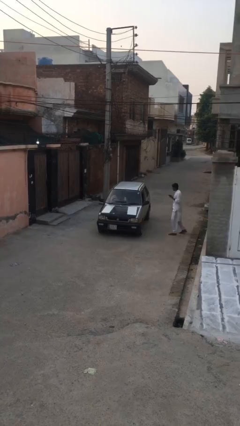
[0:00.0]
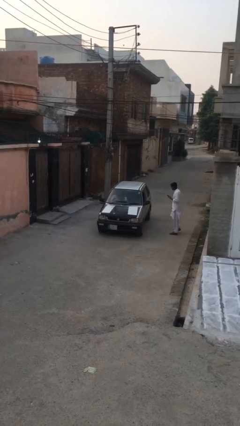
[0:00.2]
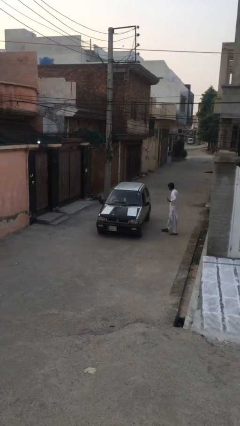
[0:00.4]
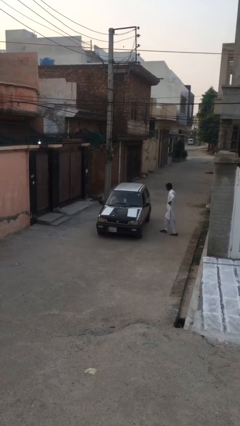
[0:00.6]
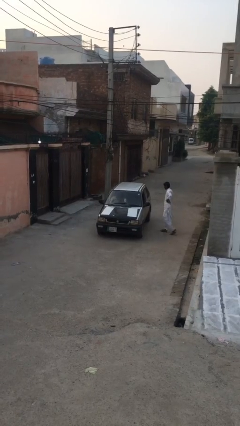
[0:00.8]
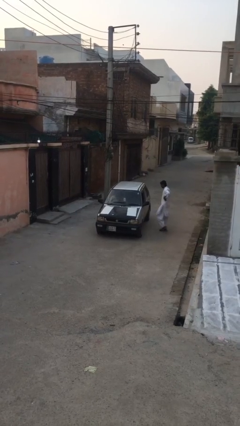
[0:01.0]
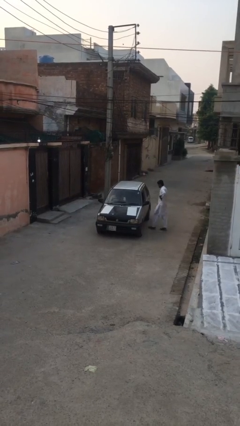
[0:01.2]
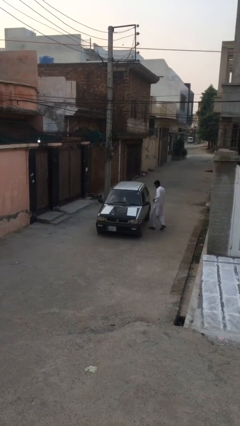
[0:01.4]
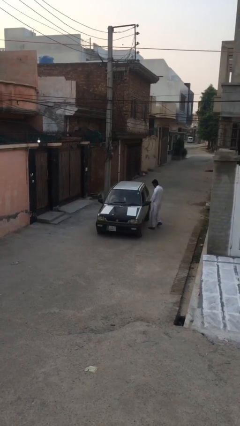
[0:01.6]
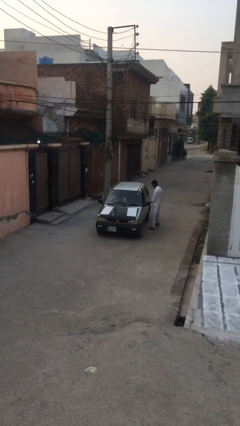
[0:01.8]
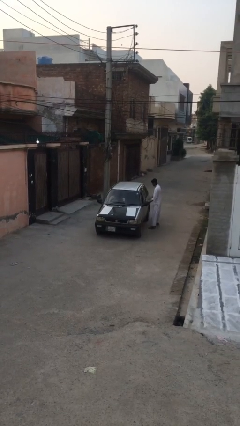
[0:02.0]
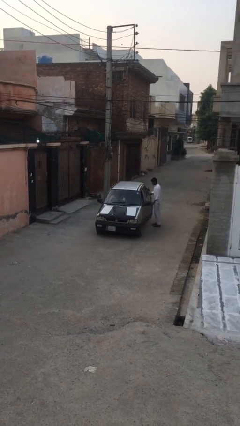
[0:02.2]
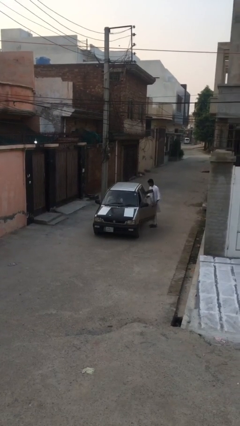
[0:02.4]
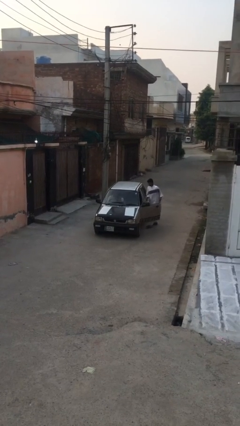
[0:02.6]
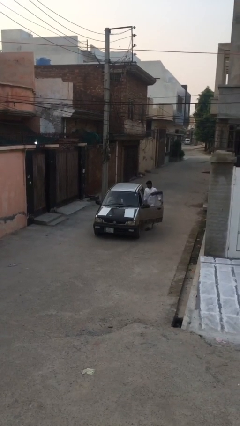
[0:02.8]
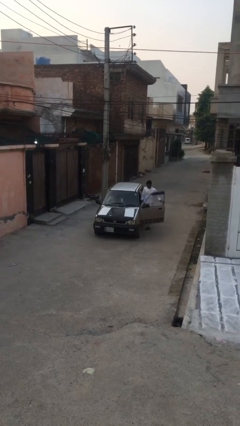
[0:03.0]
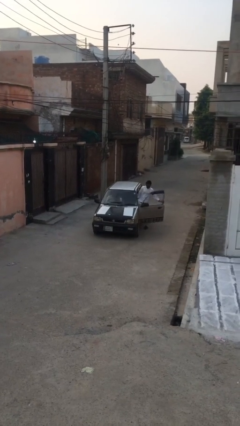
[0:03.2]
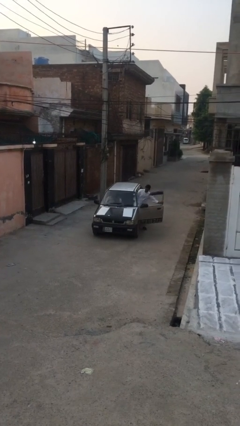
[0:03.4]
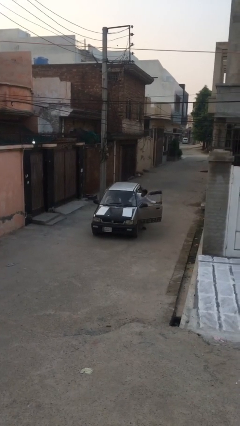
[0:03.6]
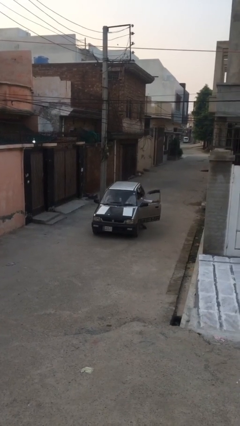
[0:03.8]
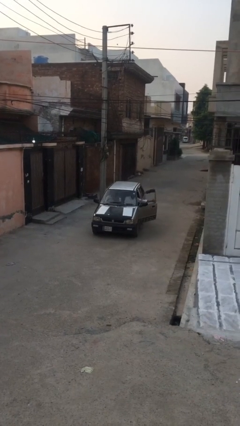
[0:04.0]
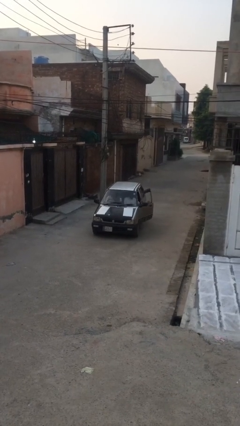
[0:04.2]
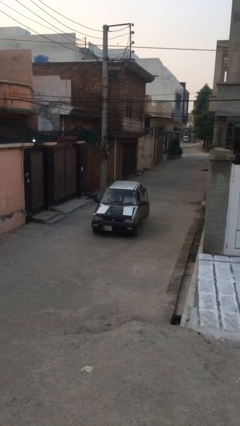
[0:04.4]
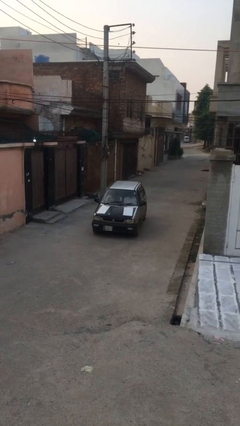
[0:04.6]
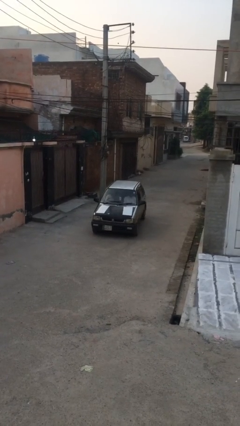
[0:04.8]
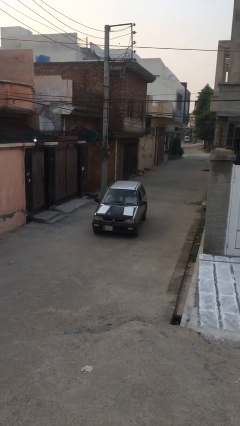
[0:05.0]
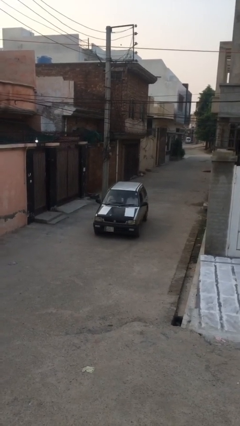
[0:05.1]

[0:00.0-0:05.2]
car picks up person

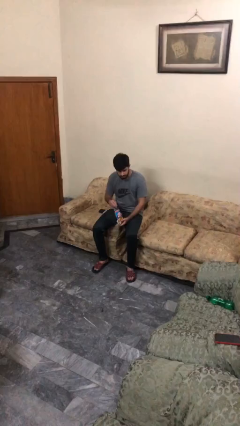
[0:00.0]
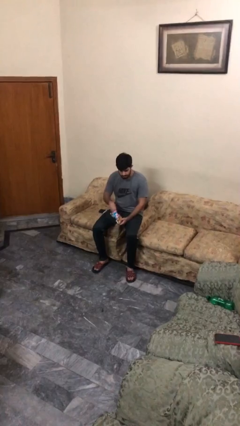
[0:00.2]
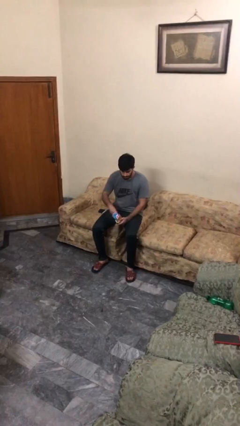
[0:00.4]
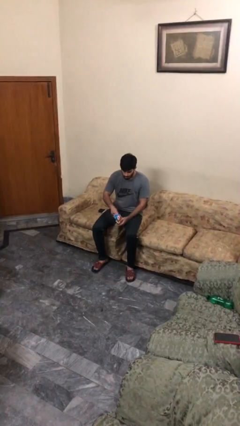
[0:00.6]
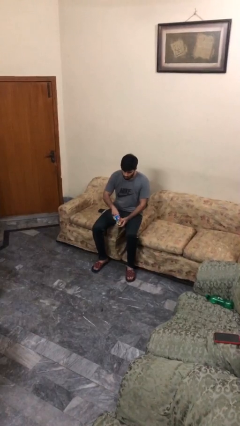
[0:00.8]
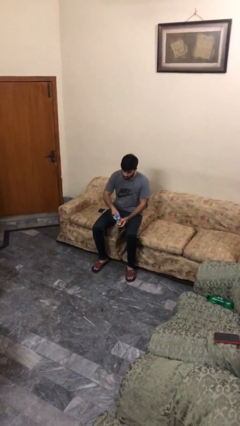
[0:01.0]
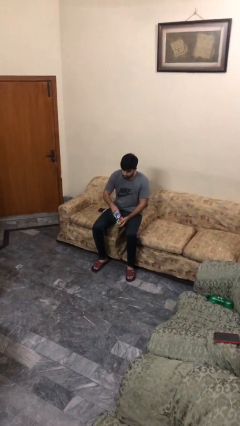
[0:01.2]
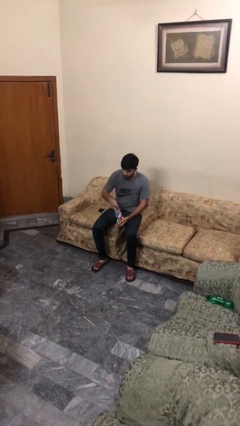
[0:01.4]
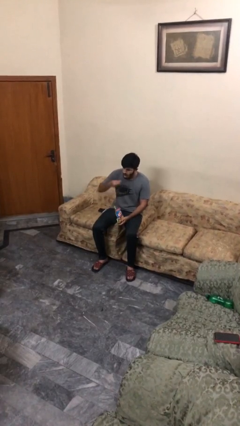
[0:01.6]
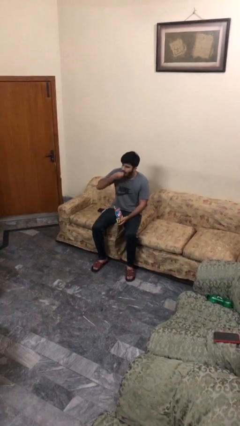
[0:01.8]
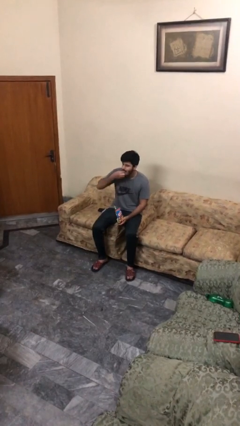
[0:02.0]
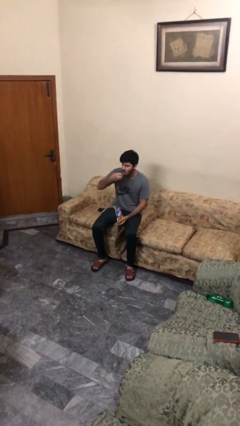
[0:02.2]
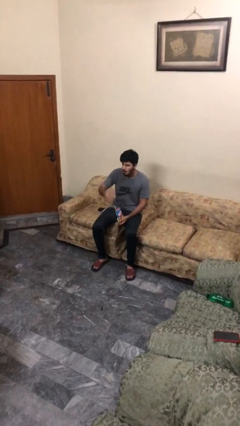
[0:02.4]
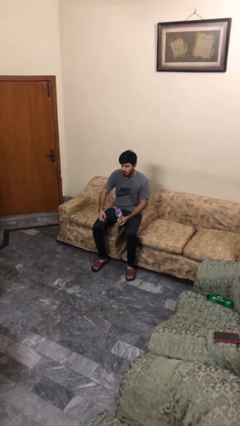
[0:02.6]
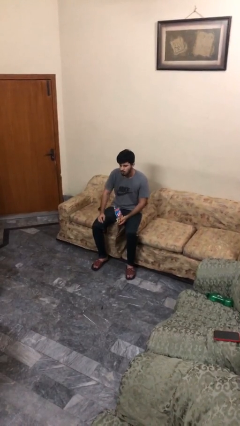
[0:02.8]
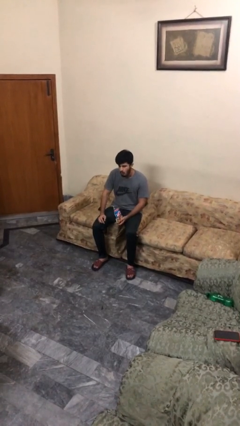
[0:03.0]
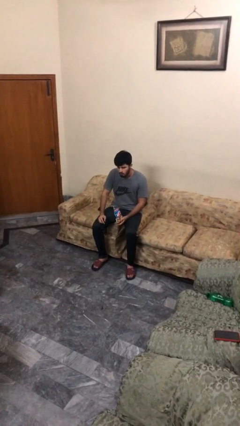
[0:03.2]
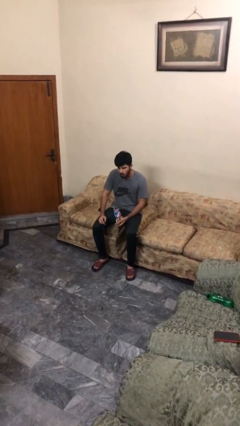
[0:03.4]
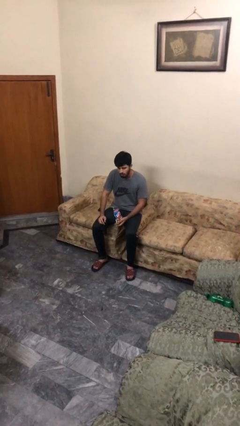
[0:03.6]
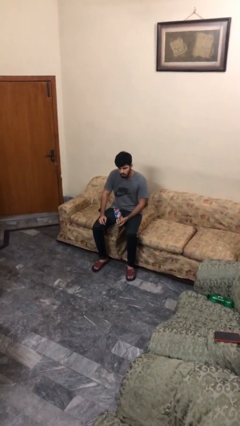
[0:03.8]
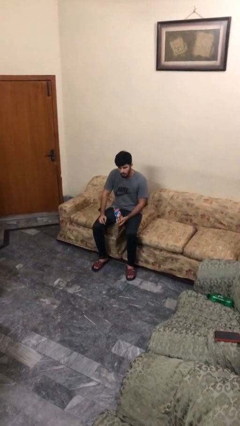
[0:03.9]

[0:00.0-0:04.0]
person eats snack from bag

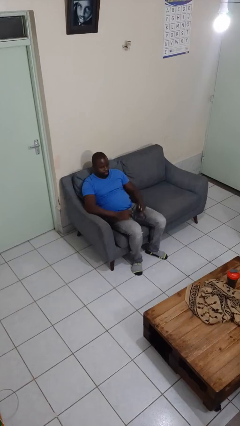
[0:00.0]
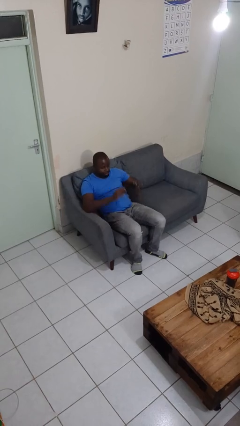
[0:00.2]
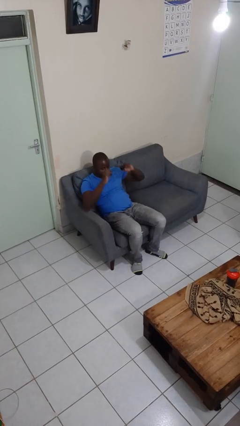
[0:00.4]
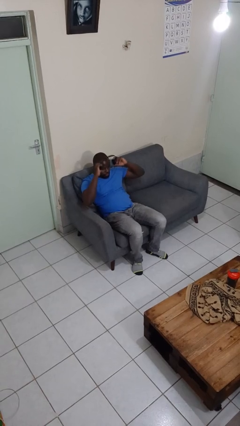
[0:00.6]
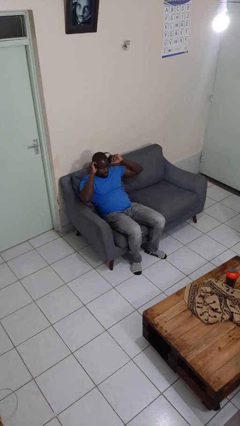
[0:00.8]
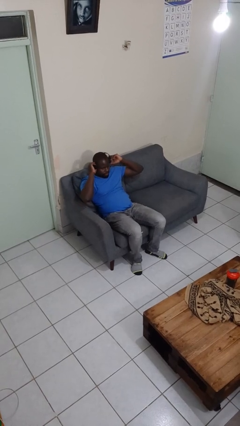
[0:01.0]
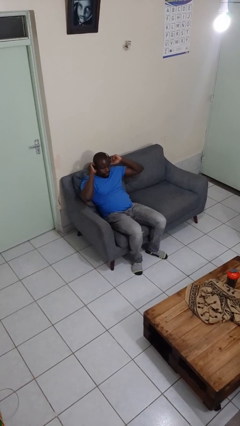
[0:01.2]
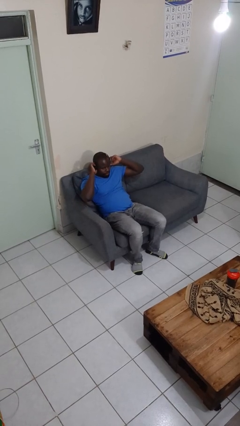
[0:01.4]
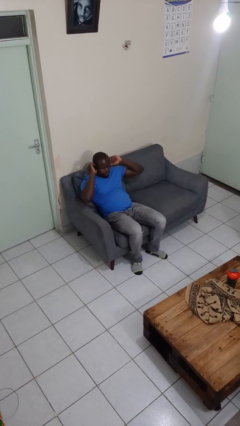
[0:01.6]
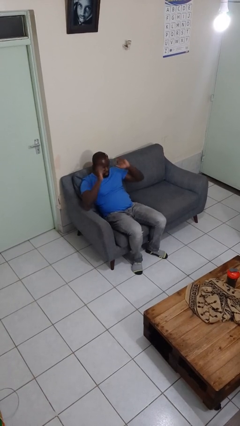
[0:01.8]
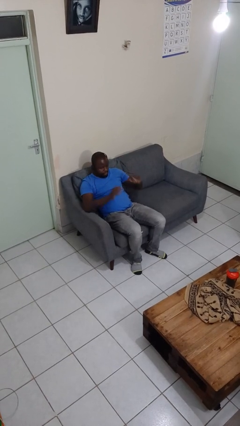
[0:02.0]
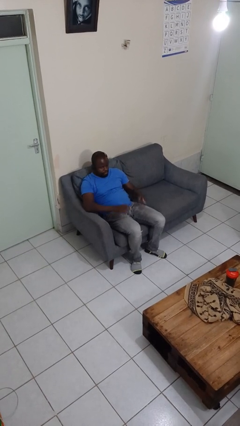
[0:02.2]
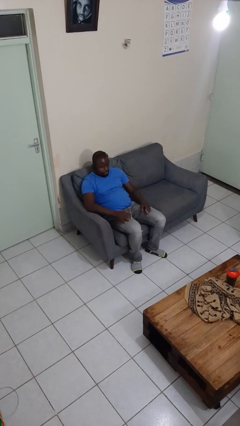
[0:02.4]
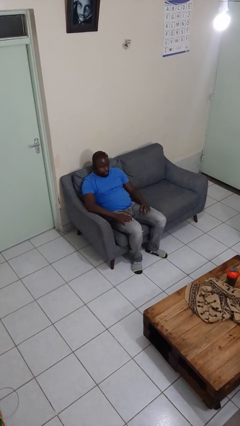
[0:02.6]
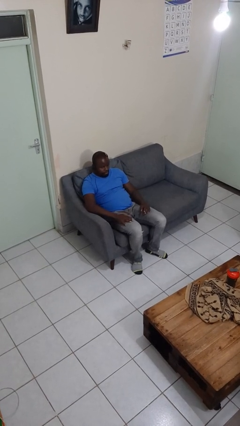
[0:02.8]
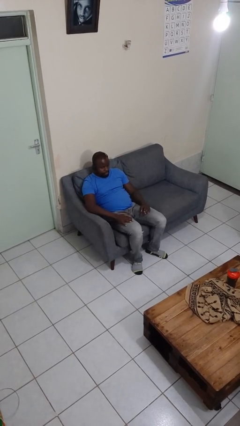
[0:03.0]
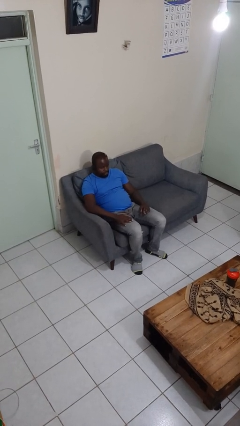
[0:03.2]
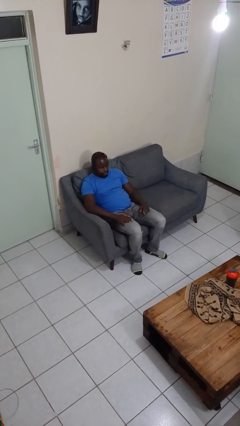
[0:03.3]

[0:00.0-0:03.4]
person puts on headphones

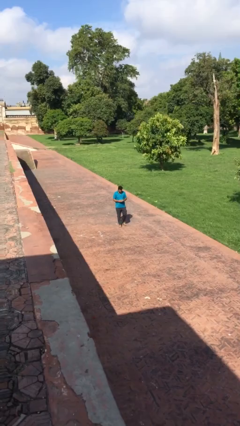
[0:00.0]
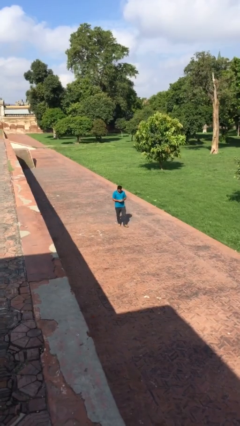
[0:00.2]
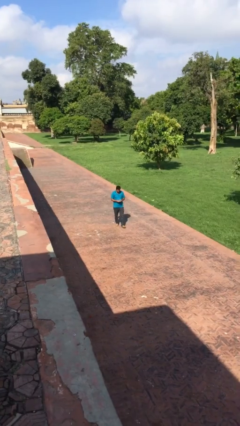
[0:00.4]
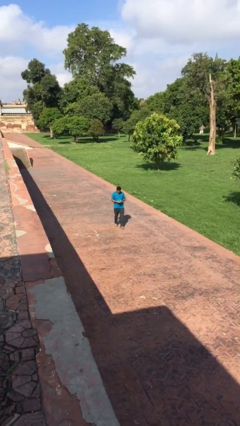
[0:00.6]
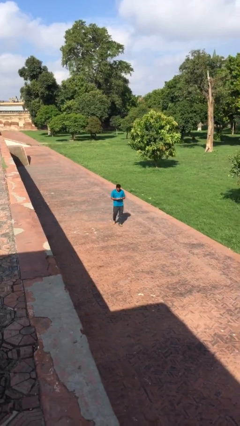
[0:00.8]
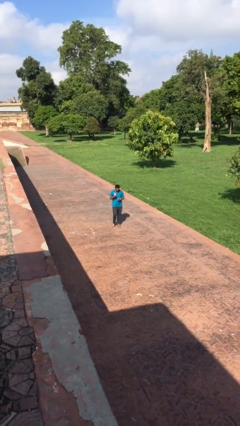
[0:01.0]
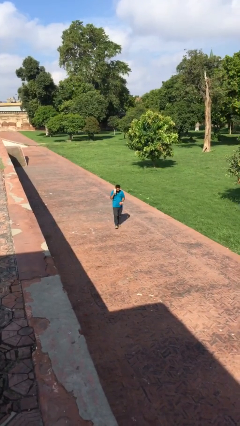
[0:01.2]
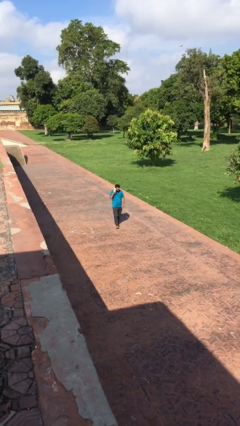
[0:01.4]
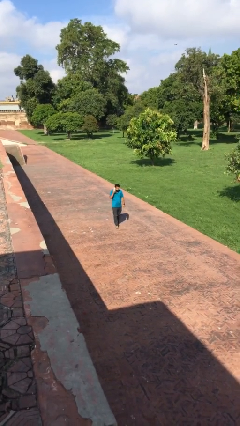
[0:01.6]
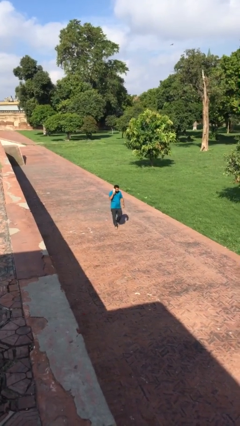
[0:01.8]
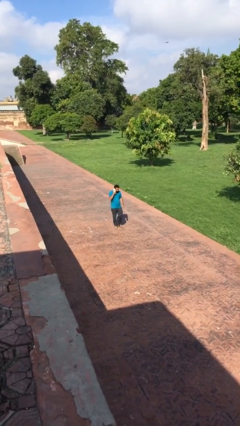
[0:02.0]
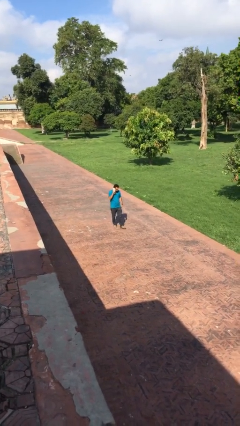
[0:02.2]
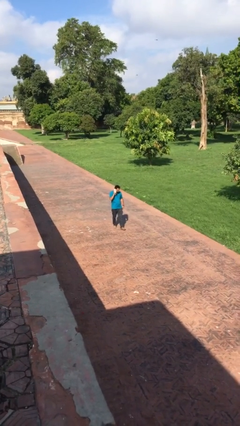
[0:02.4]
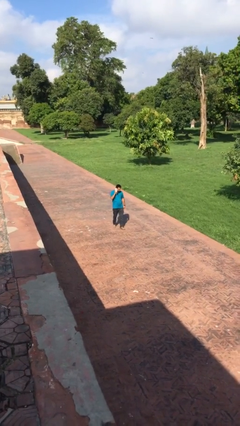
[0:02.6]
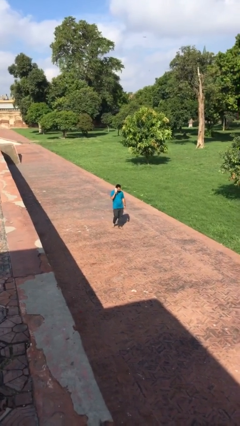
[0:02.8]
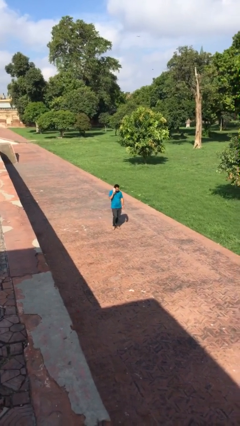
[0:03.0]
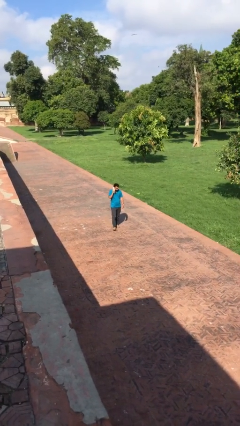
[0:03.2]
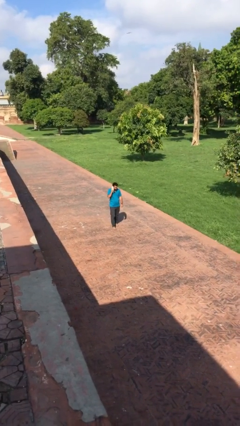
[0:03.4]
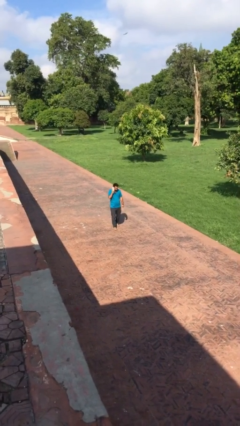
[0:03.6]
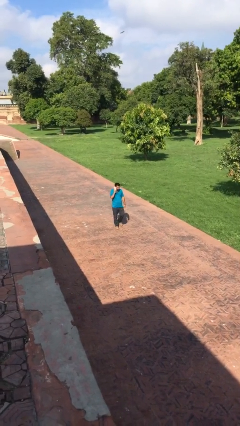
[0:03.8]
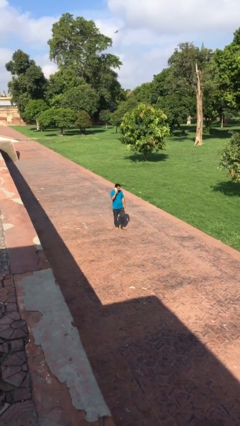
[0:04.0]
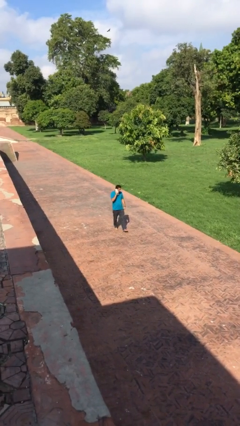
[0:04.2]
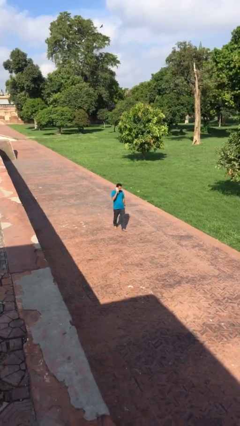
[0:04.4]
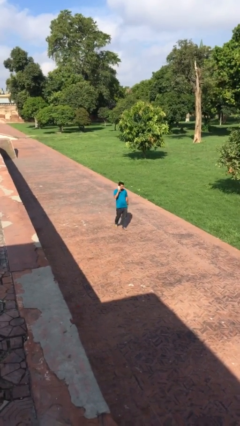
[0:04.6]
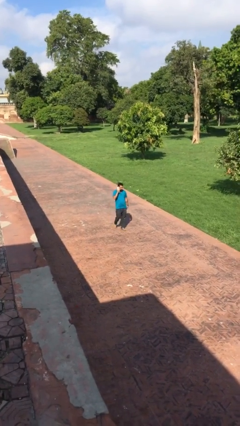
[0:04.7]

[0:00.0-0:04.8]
person talks on phone

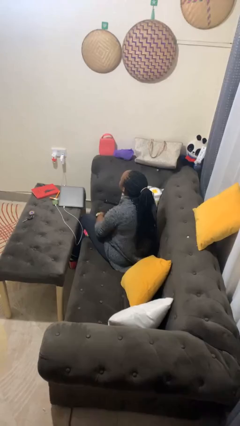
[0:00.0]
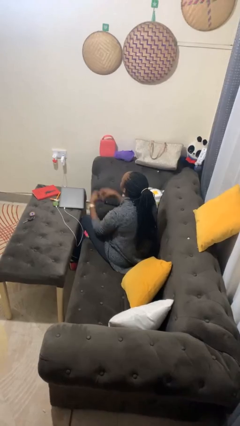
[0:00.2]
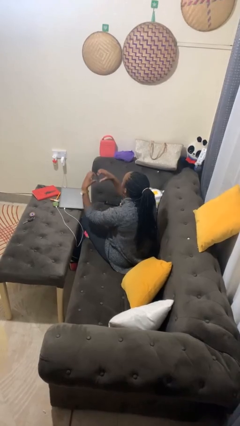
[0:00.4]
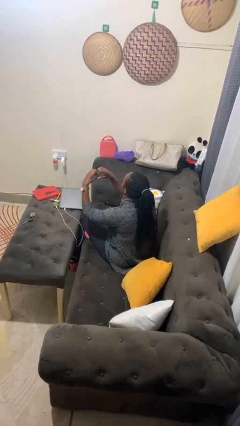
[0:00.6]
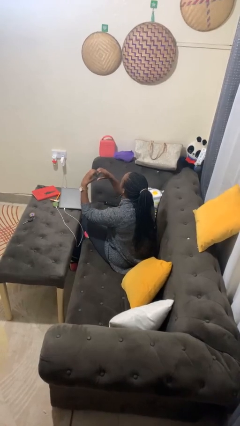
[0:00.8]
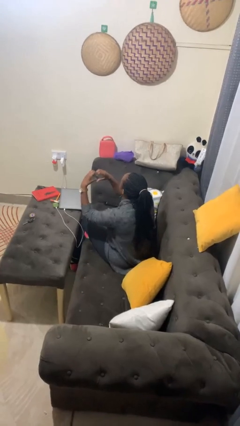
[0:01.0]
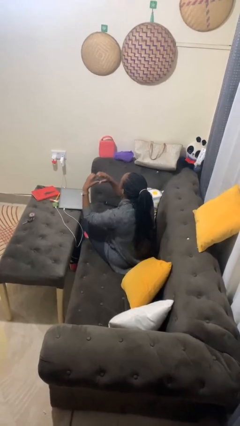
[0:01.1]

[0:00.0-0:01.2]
person gestures heart
